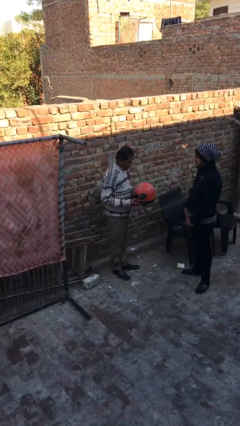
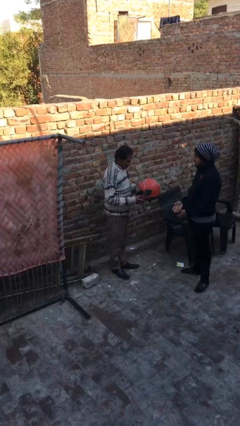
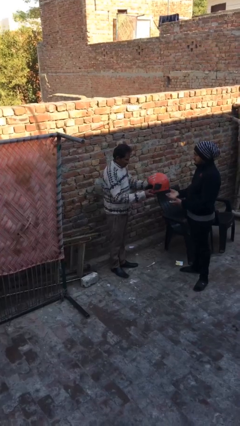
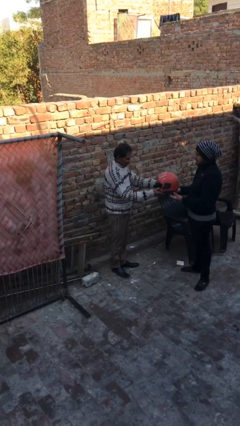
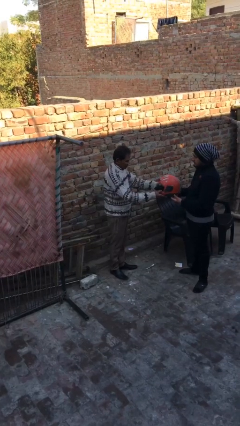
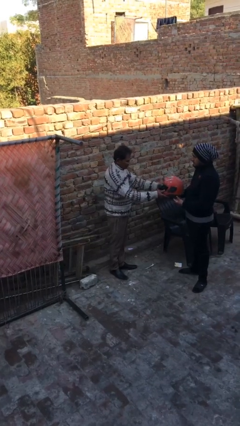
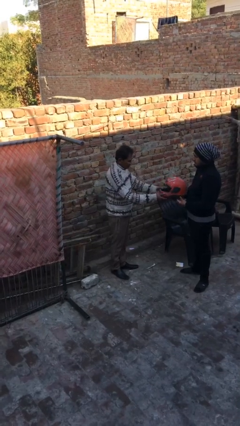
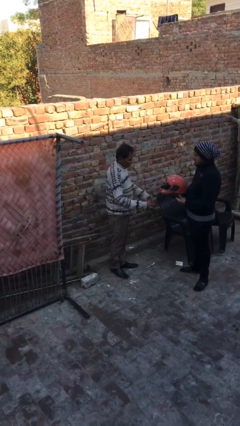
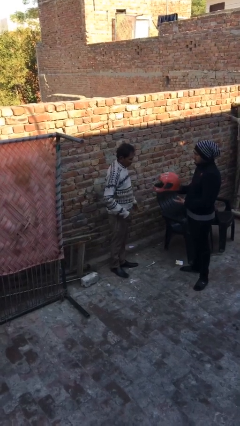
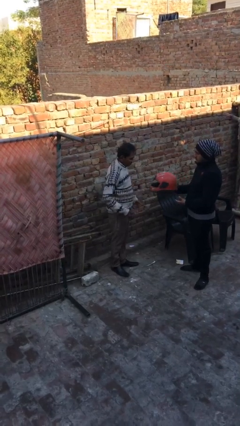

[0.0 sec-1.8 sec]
person transfers object to person

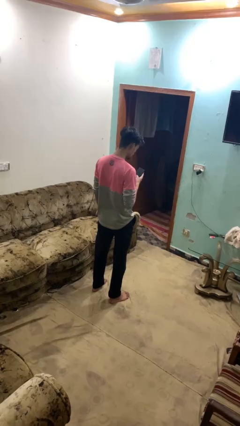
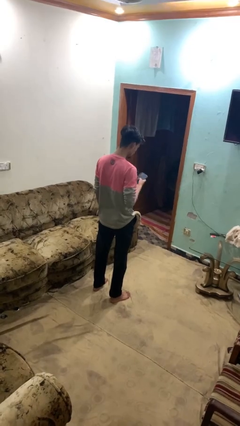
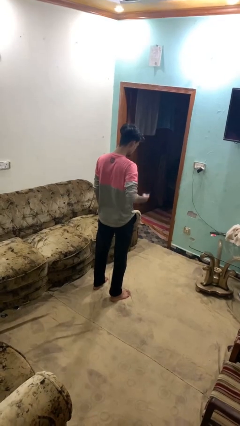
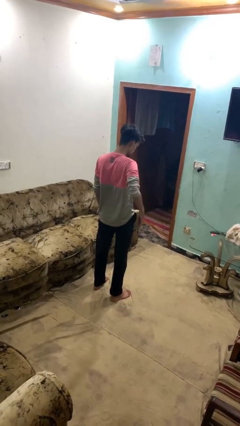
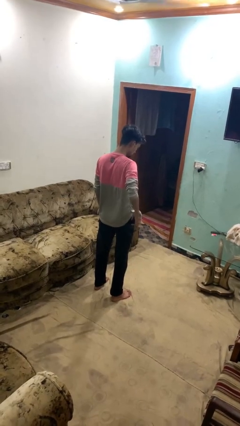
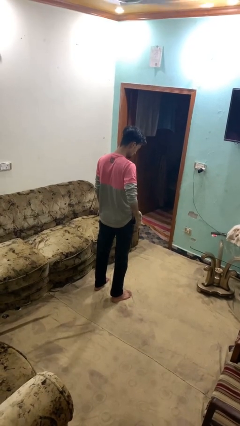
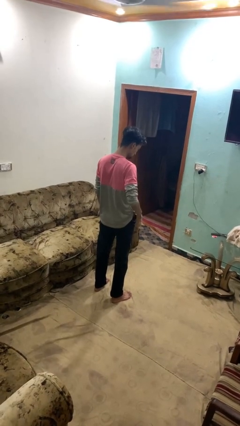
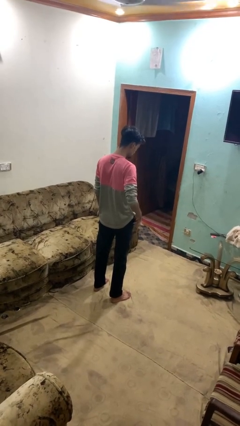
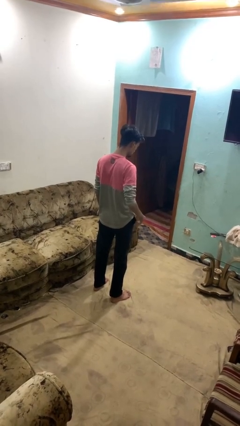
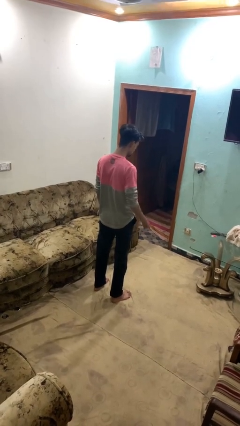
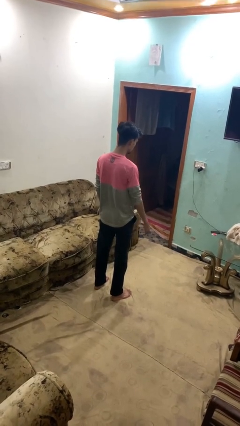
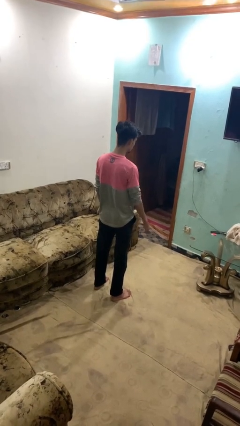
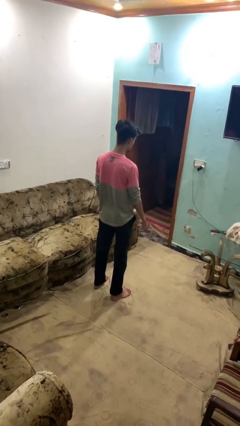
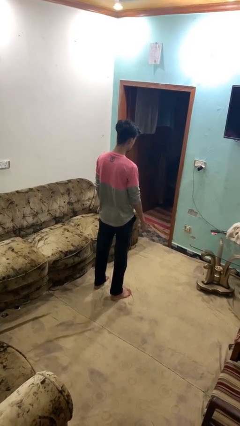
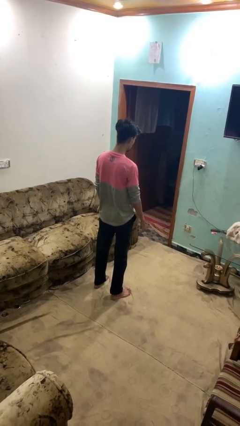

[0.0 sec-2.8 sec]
person puts phone into pocket

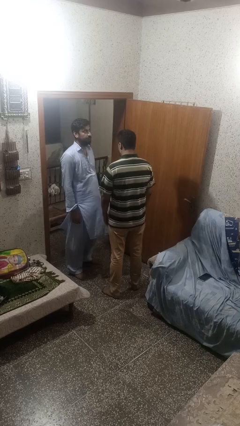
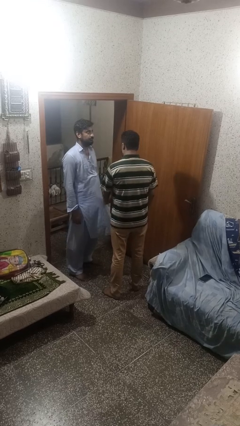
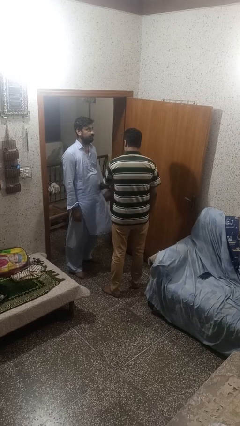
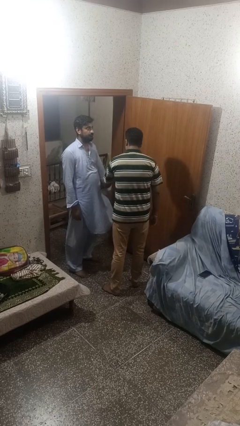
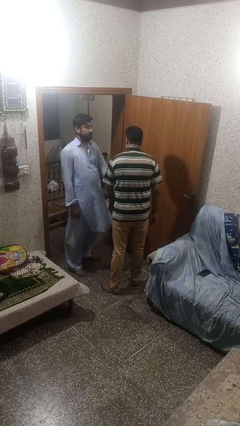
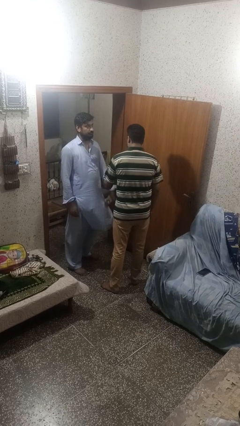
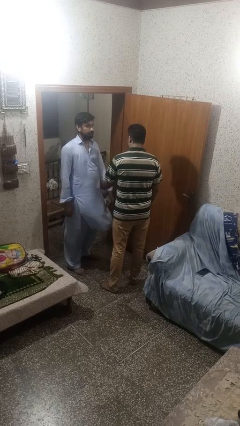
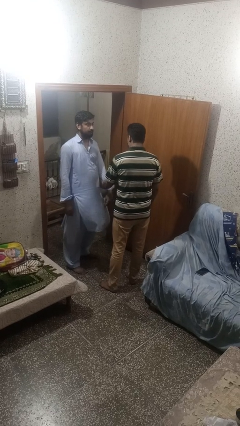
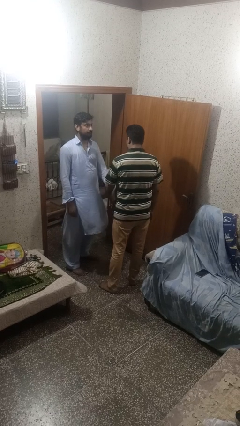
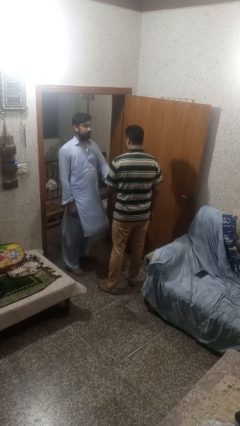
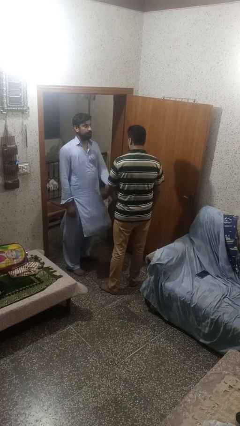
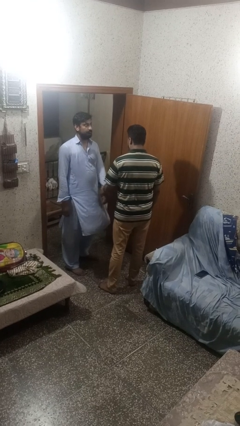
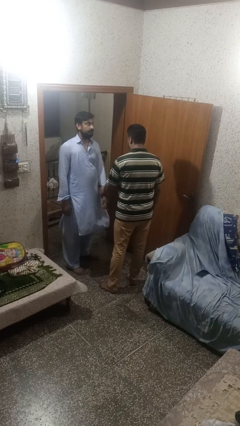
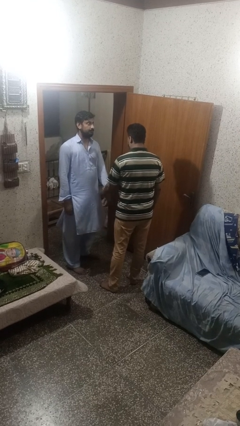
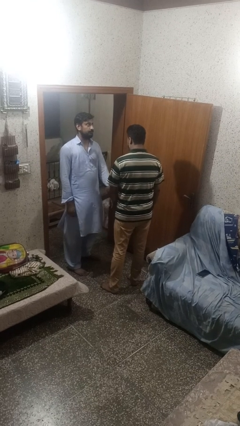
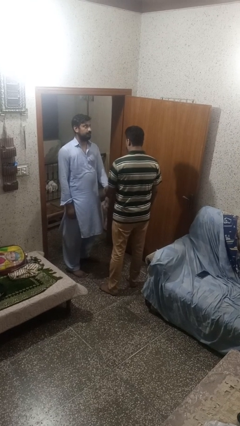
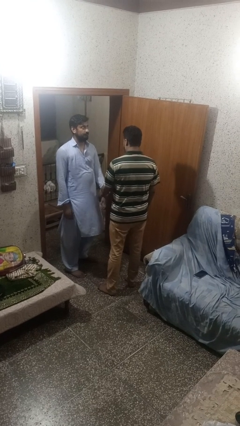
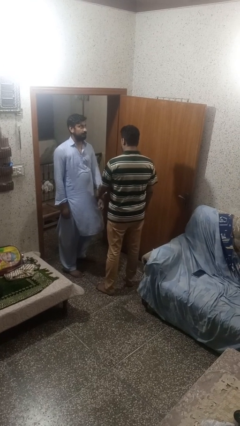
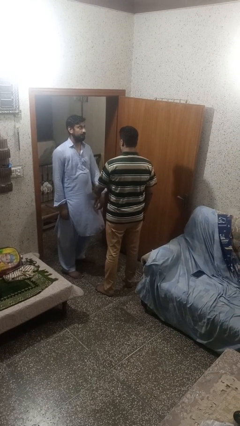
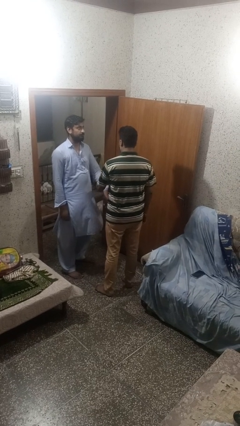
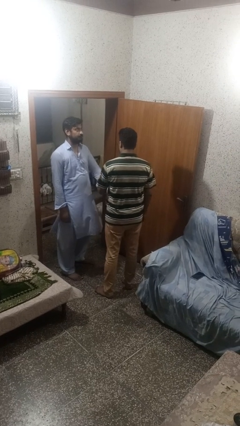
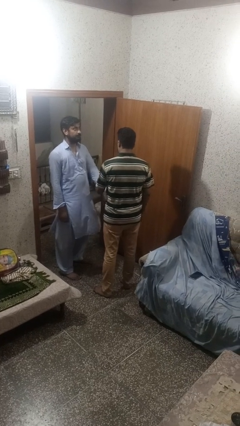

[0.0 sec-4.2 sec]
person grabs person by forearm

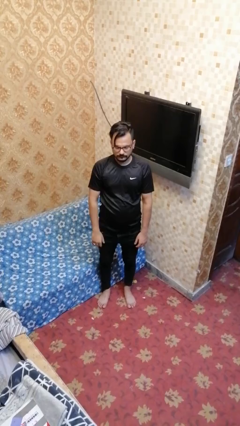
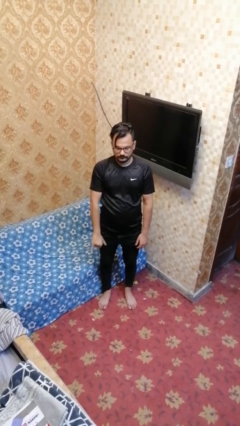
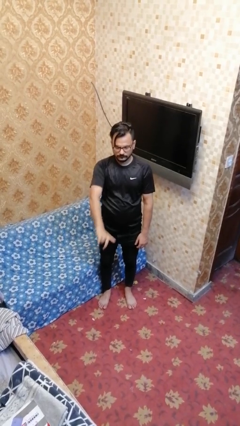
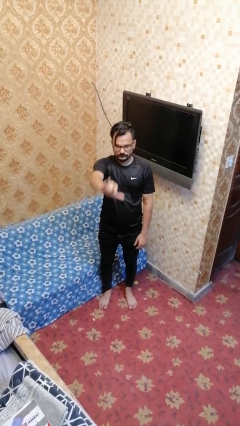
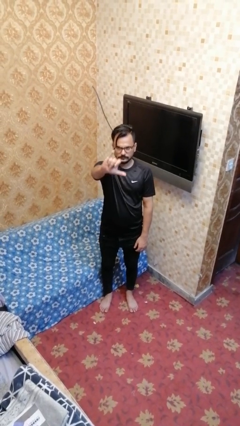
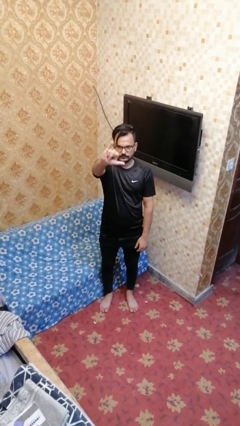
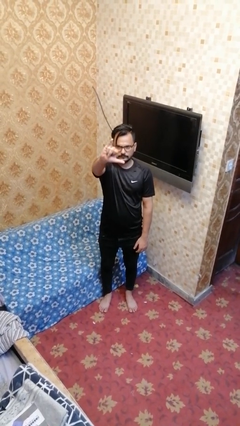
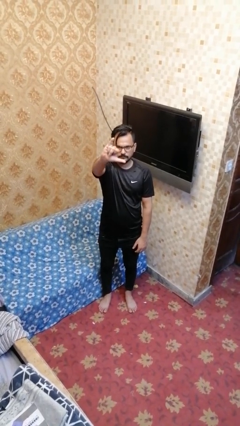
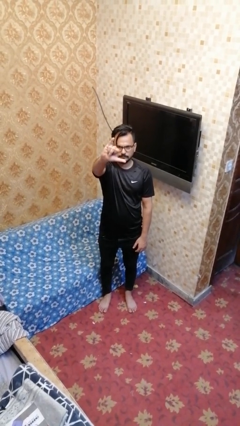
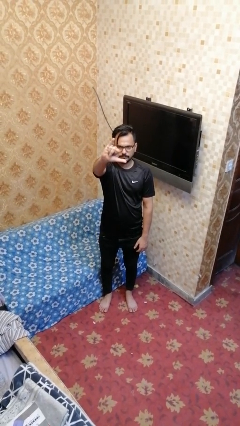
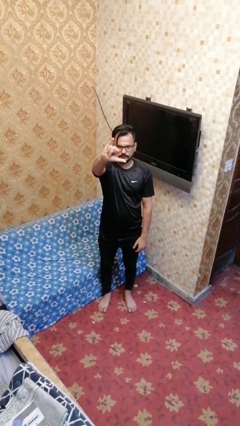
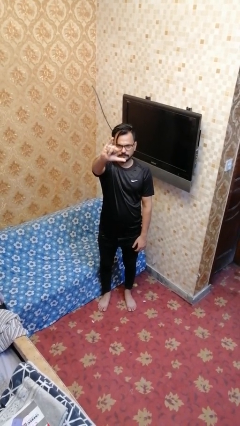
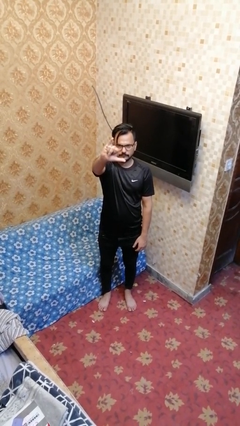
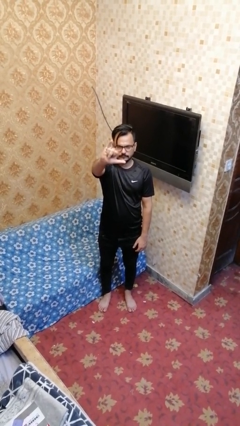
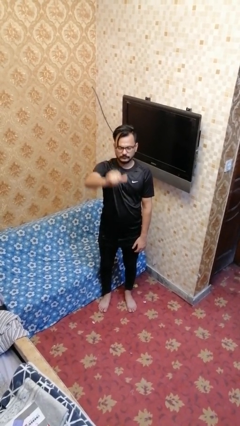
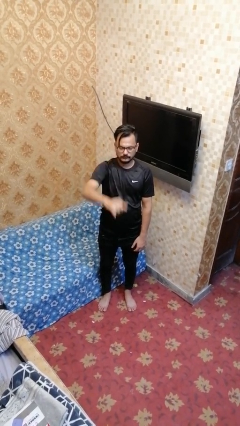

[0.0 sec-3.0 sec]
person gestures hang loose

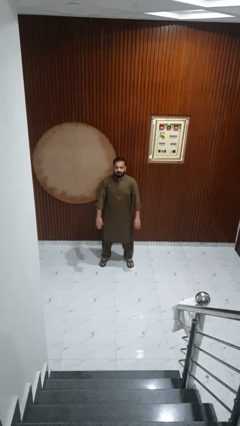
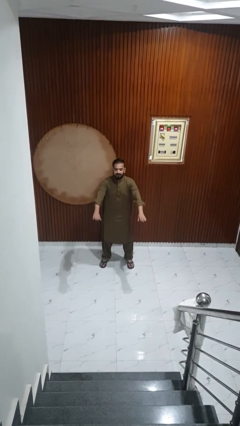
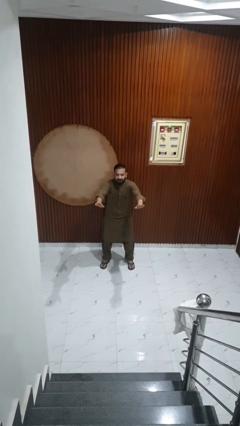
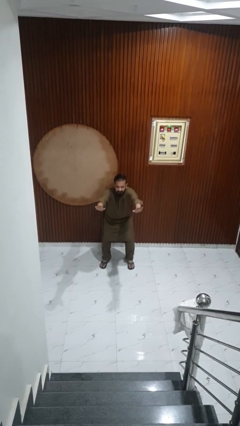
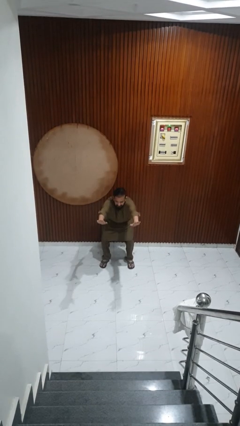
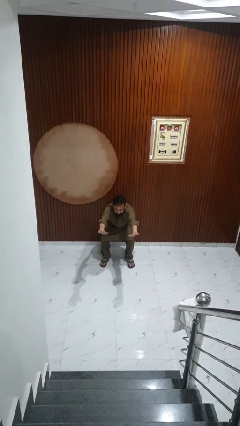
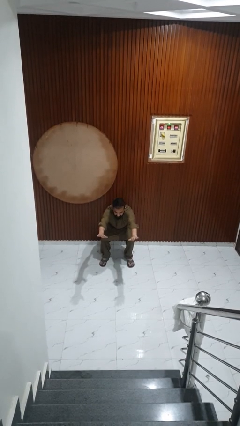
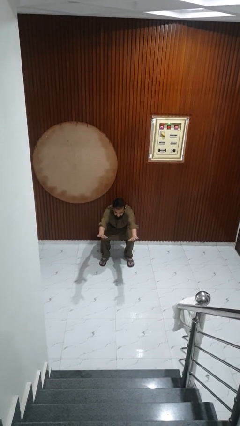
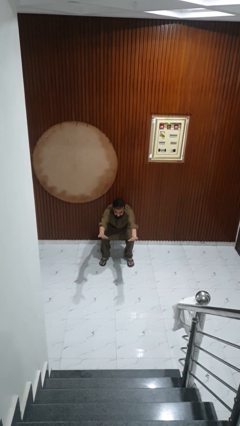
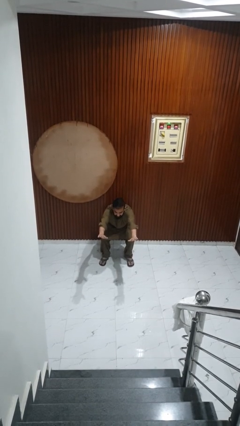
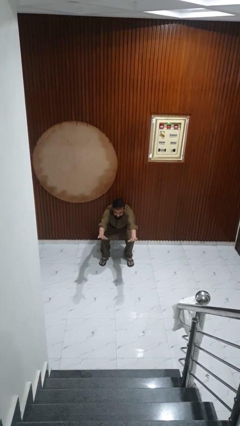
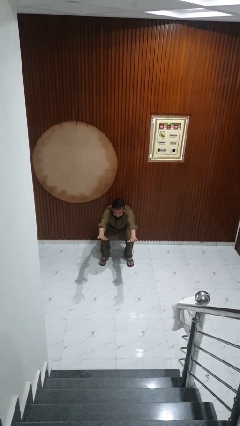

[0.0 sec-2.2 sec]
person squats

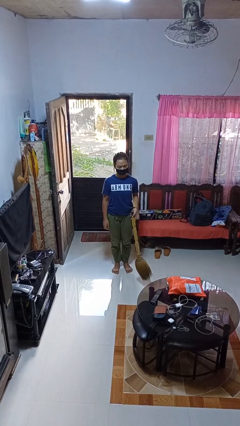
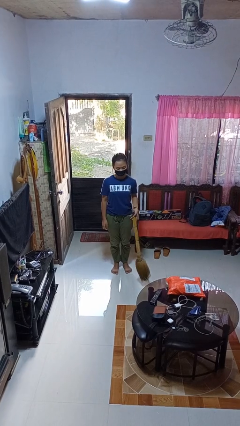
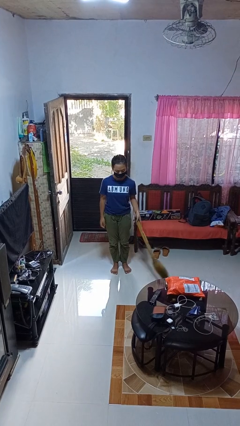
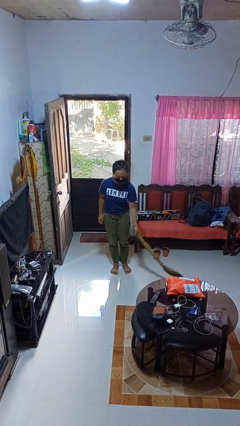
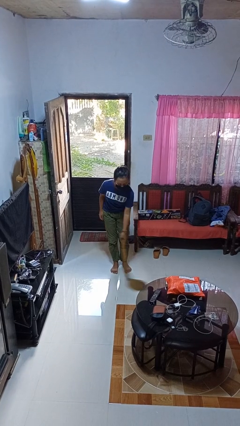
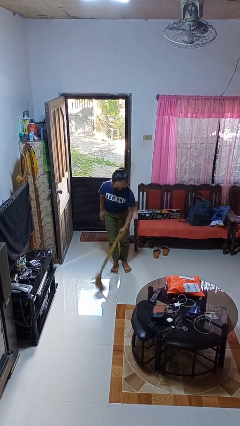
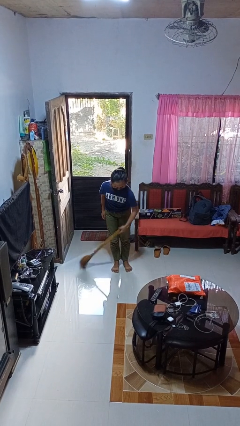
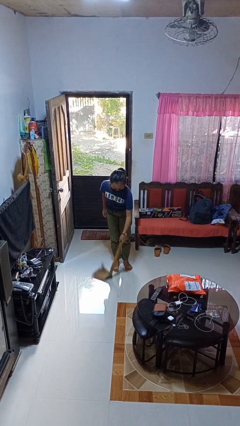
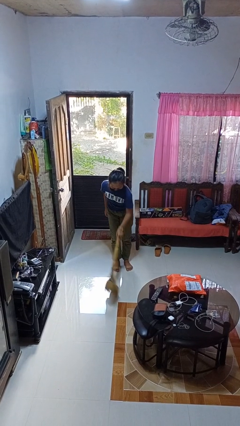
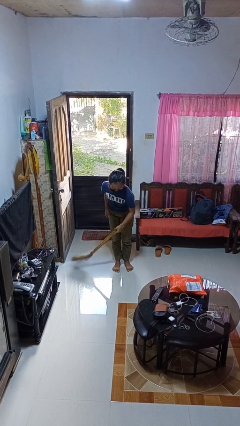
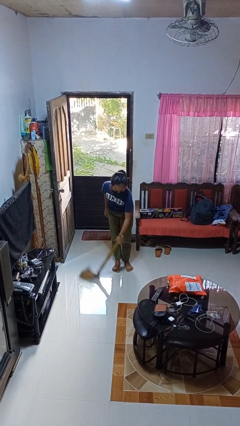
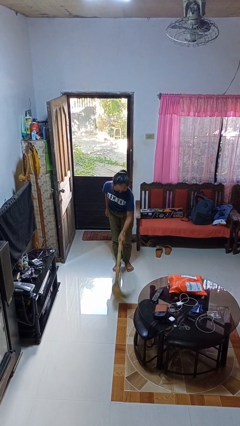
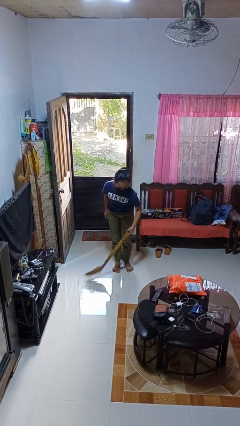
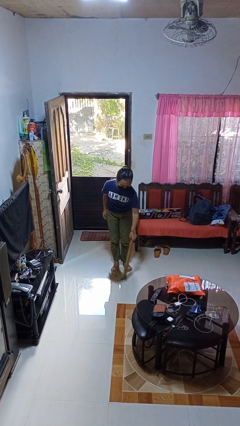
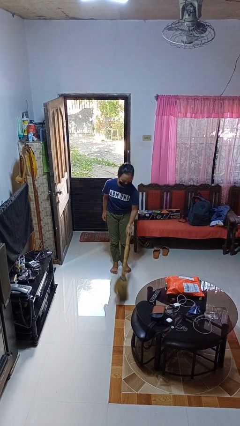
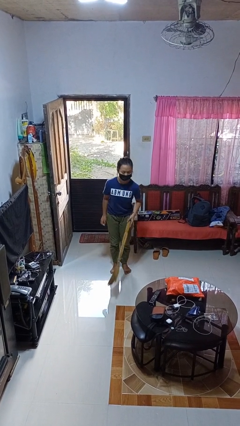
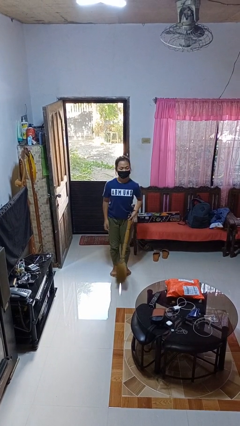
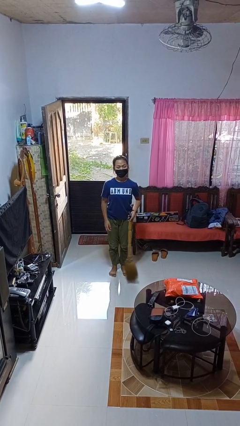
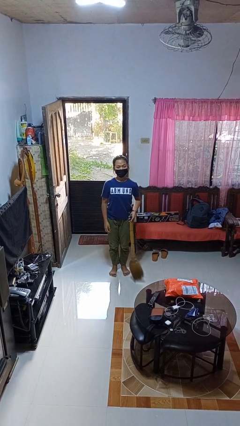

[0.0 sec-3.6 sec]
person sweeps floor
